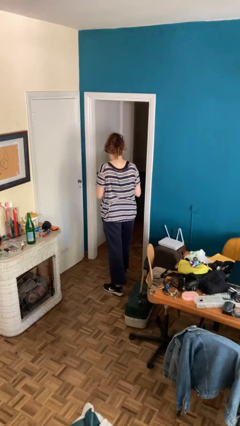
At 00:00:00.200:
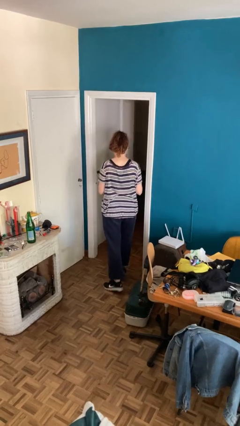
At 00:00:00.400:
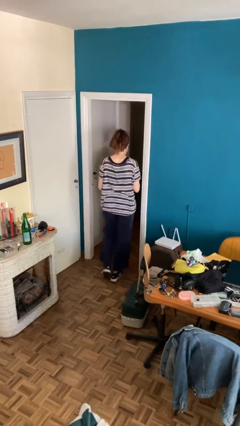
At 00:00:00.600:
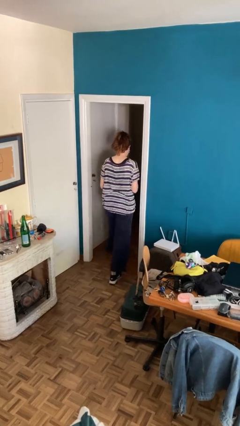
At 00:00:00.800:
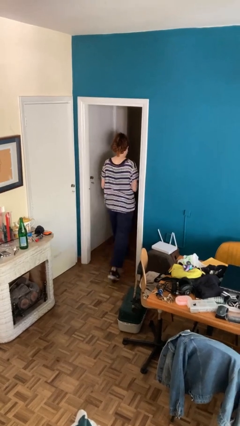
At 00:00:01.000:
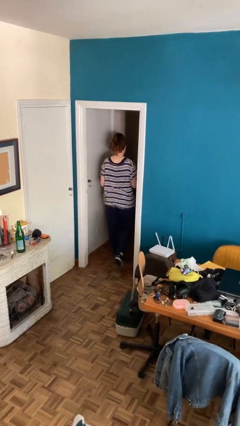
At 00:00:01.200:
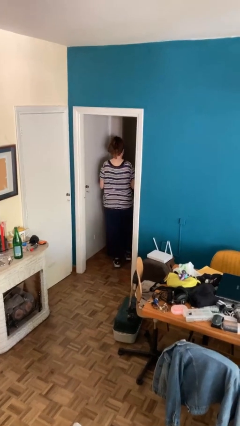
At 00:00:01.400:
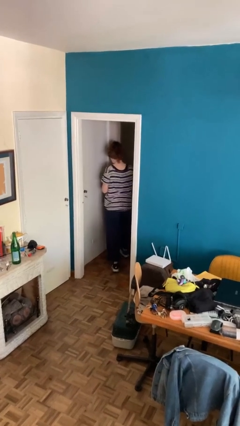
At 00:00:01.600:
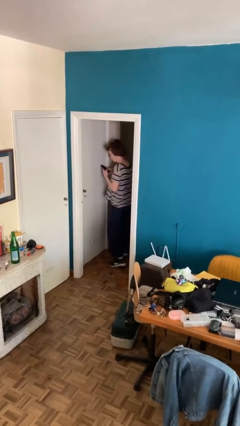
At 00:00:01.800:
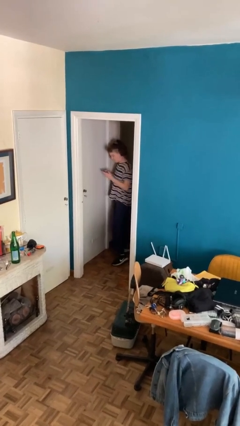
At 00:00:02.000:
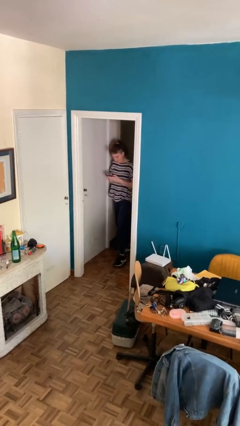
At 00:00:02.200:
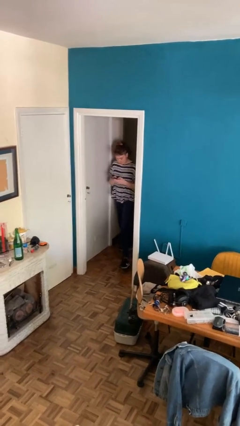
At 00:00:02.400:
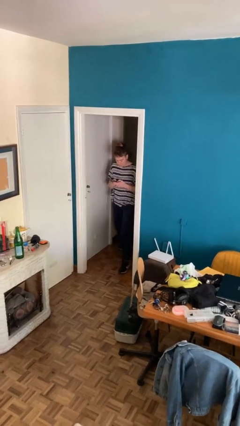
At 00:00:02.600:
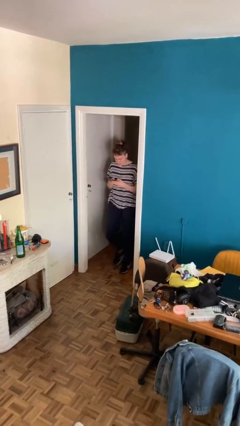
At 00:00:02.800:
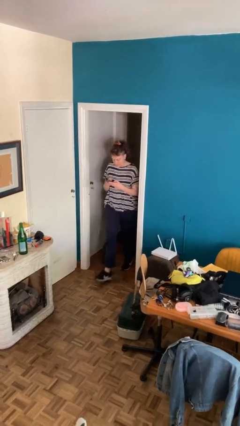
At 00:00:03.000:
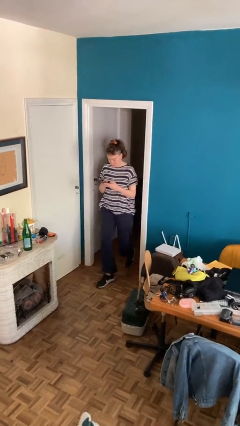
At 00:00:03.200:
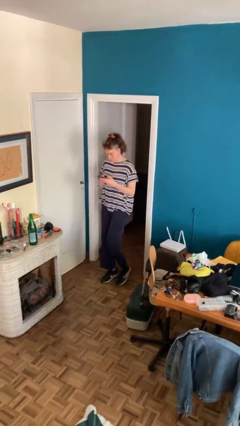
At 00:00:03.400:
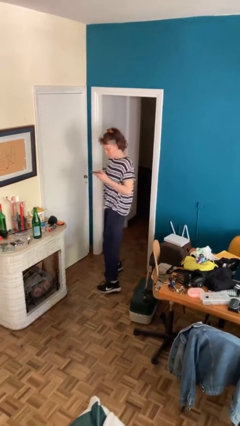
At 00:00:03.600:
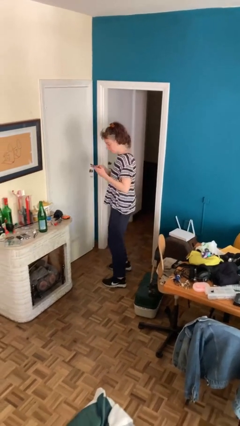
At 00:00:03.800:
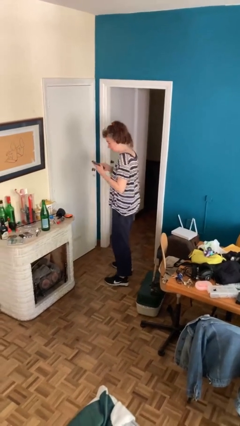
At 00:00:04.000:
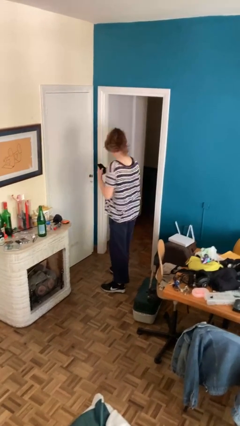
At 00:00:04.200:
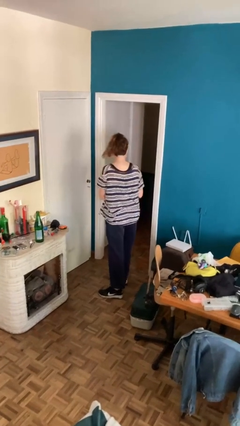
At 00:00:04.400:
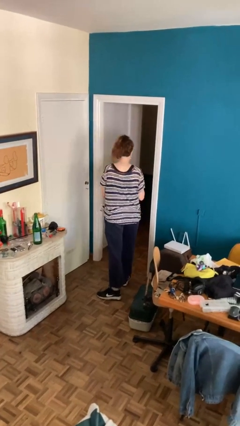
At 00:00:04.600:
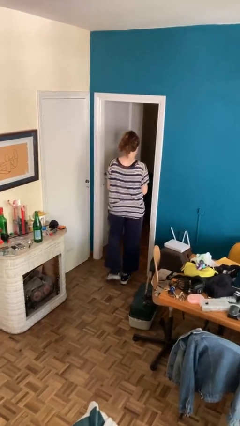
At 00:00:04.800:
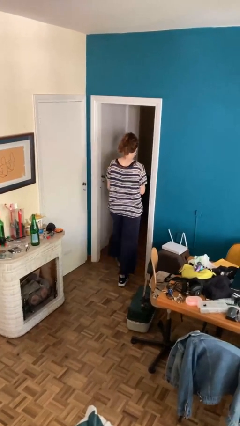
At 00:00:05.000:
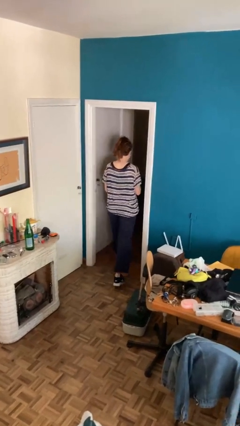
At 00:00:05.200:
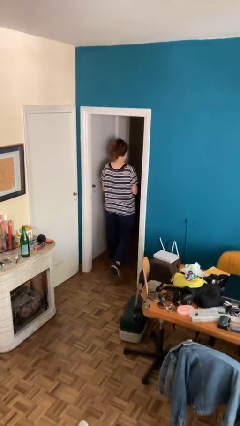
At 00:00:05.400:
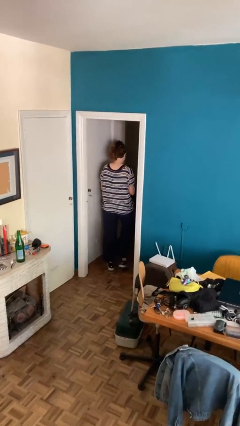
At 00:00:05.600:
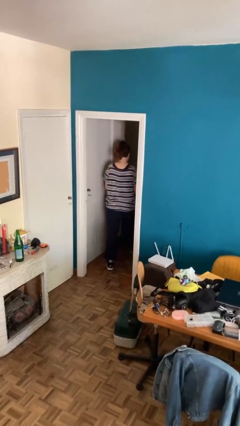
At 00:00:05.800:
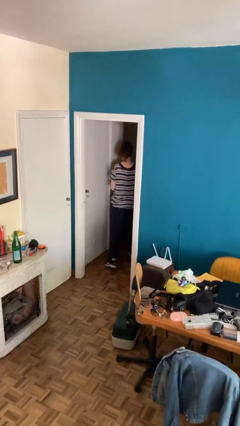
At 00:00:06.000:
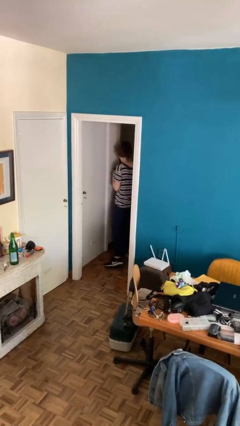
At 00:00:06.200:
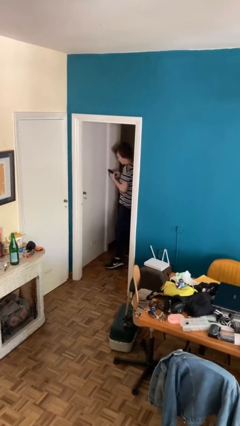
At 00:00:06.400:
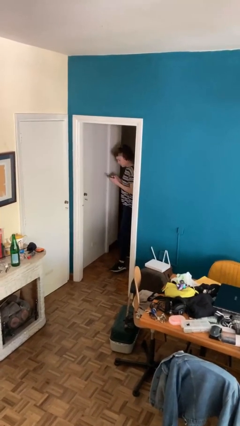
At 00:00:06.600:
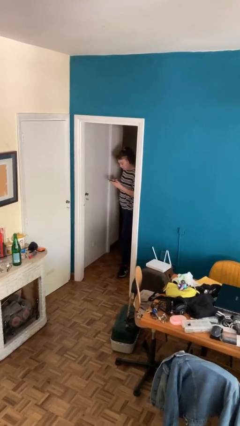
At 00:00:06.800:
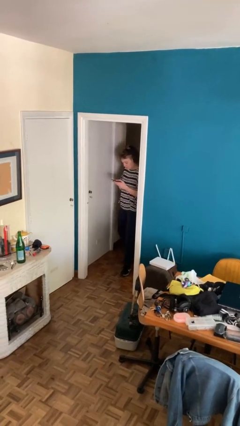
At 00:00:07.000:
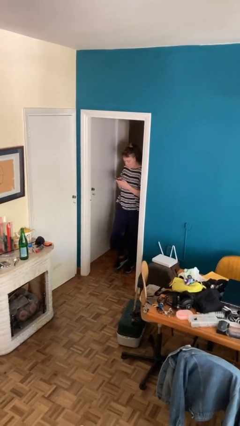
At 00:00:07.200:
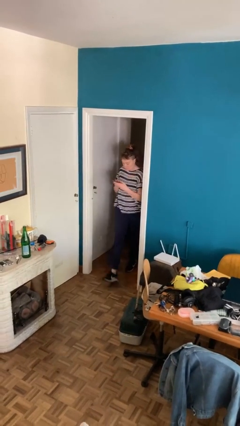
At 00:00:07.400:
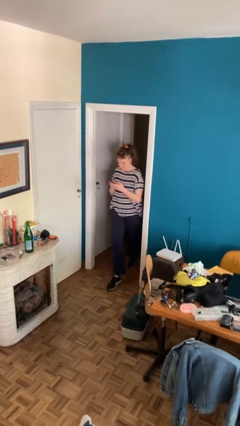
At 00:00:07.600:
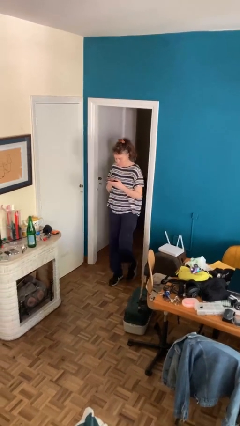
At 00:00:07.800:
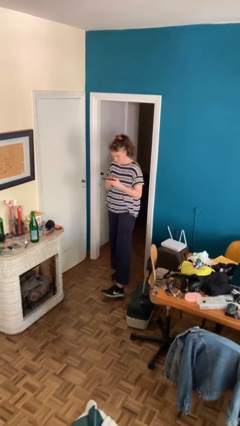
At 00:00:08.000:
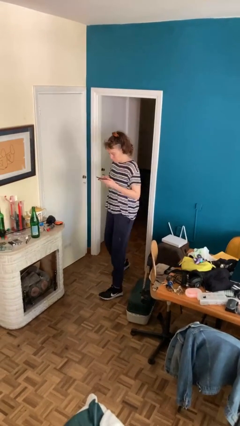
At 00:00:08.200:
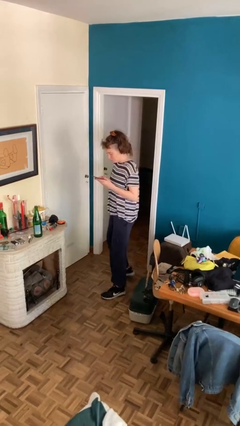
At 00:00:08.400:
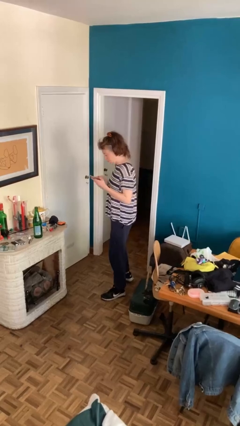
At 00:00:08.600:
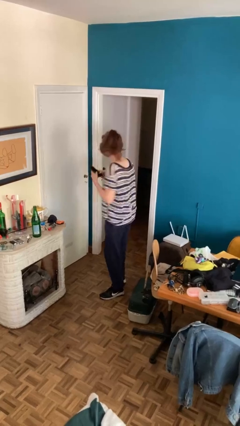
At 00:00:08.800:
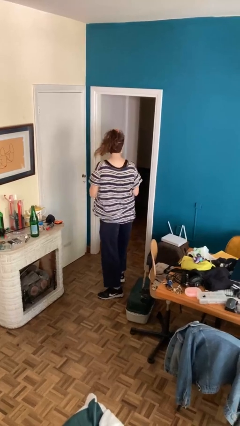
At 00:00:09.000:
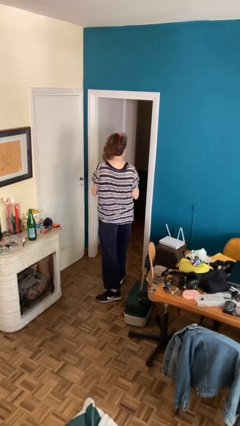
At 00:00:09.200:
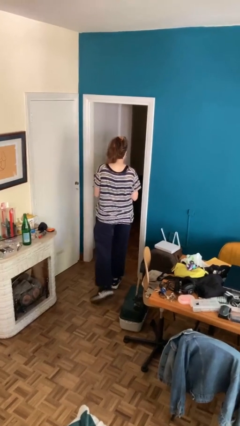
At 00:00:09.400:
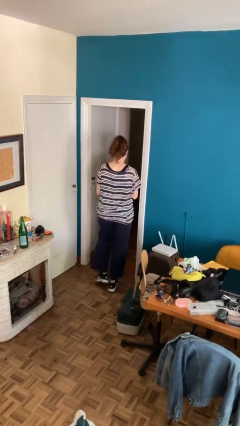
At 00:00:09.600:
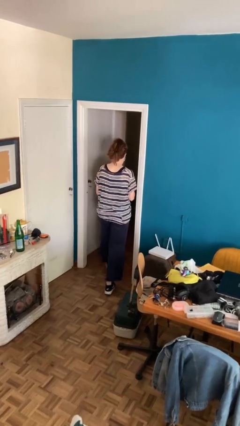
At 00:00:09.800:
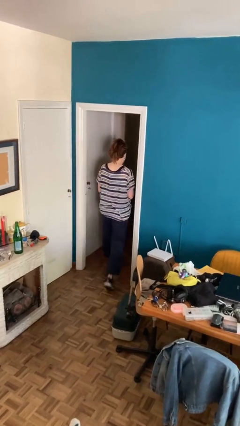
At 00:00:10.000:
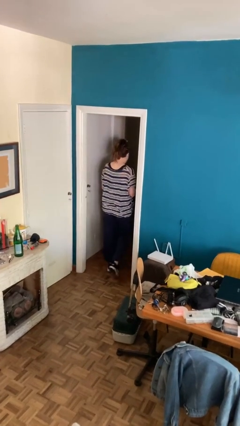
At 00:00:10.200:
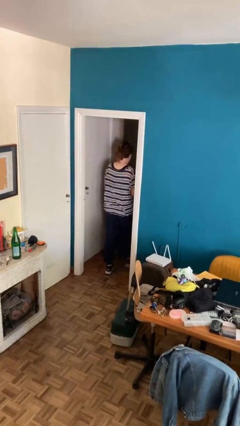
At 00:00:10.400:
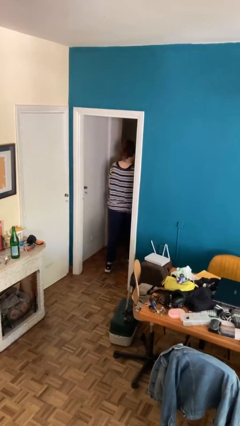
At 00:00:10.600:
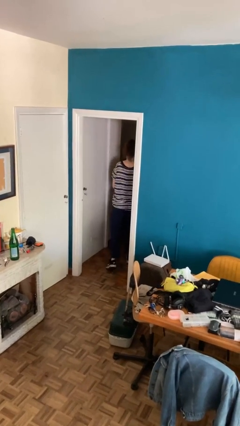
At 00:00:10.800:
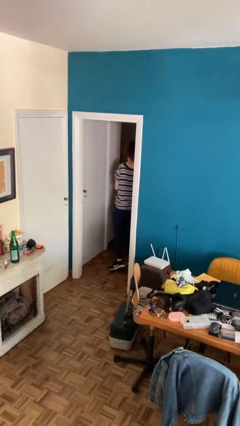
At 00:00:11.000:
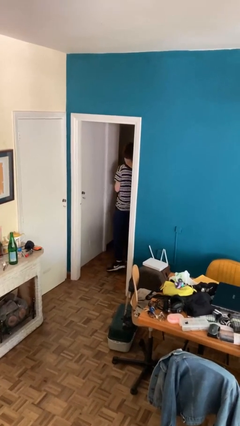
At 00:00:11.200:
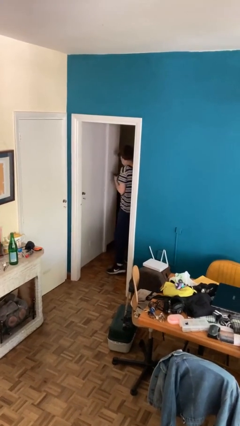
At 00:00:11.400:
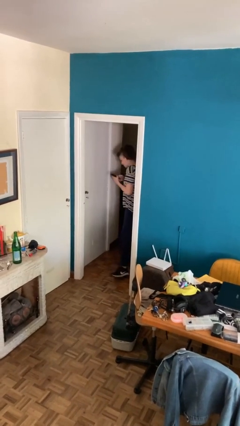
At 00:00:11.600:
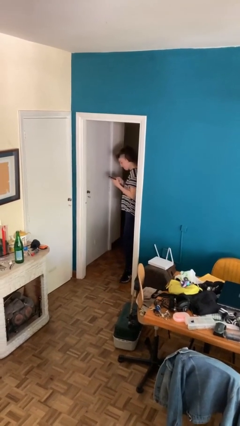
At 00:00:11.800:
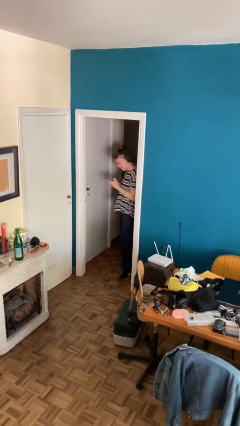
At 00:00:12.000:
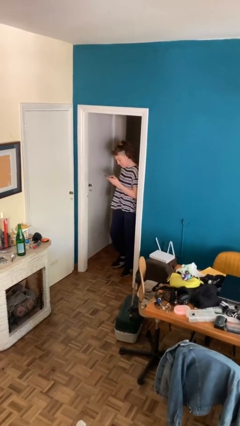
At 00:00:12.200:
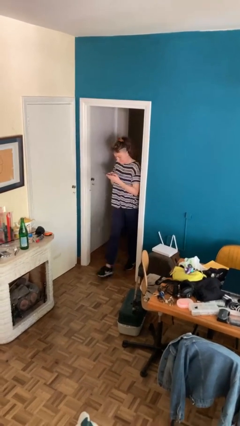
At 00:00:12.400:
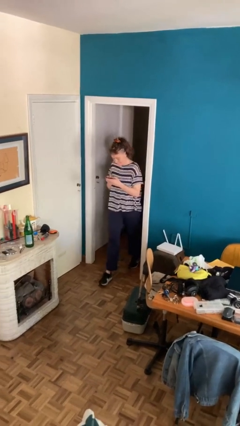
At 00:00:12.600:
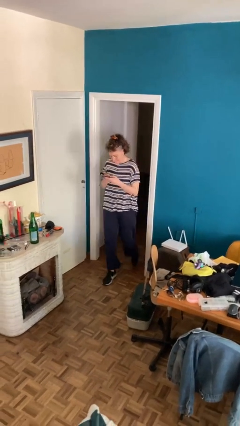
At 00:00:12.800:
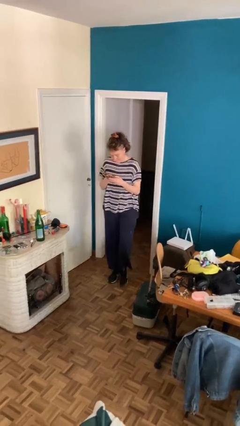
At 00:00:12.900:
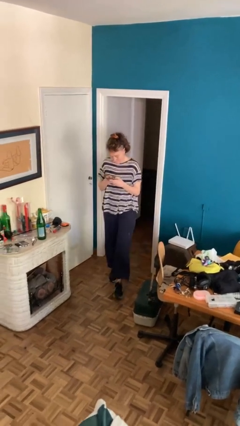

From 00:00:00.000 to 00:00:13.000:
person texts on phone

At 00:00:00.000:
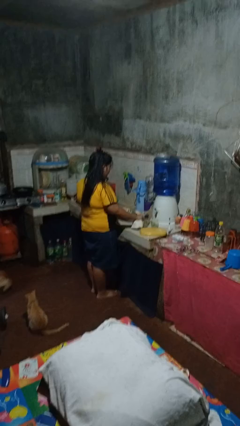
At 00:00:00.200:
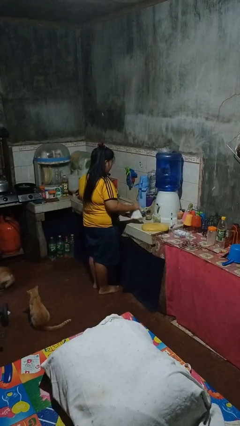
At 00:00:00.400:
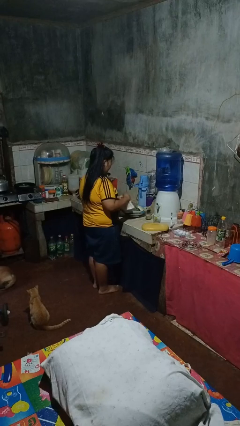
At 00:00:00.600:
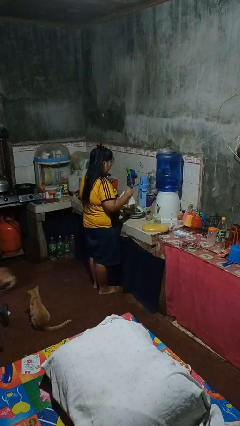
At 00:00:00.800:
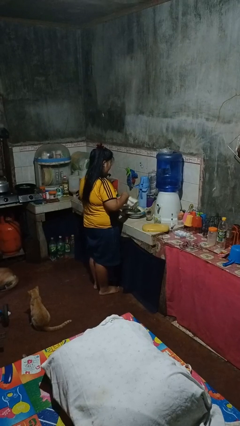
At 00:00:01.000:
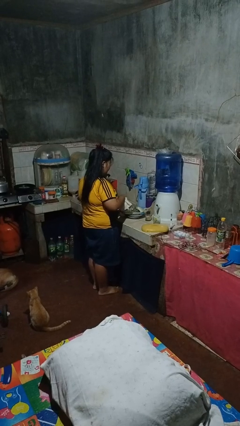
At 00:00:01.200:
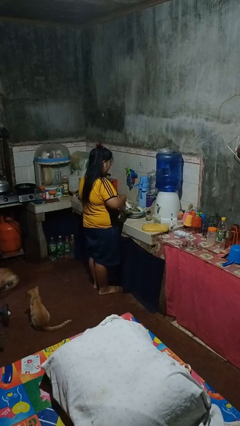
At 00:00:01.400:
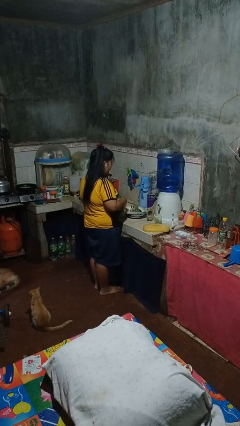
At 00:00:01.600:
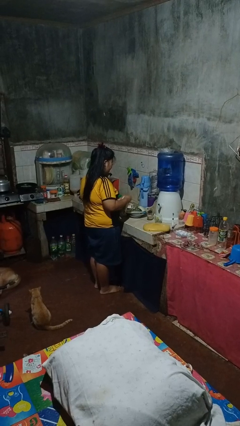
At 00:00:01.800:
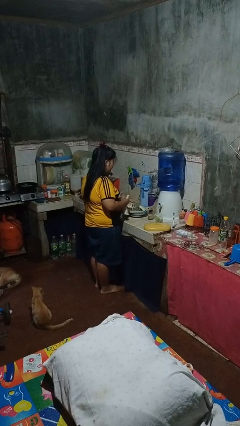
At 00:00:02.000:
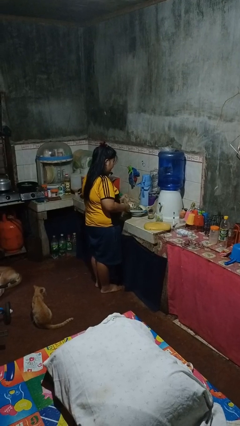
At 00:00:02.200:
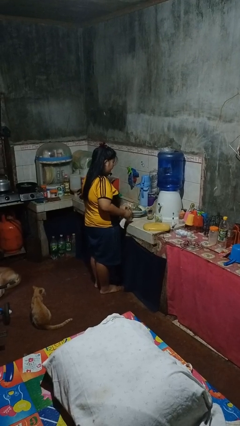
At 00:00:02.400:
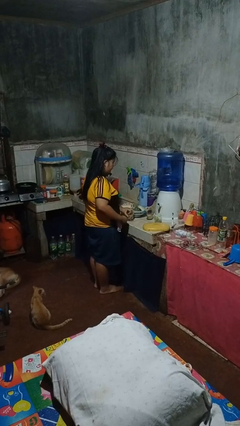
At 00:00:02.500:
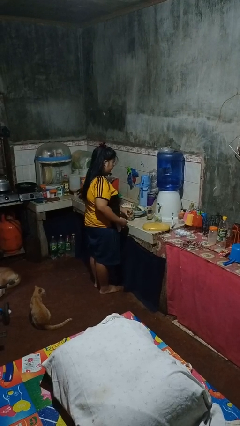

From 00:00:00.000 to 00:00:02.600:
person dries dish

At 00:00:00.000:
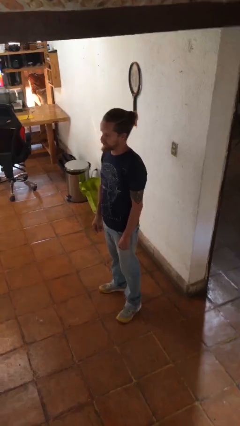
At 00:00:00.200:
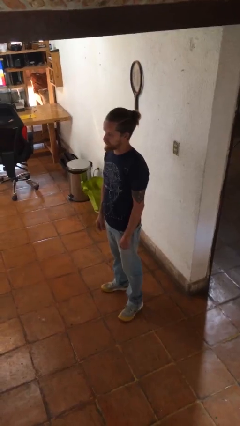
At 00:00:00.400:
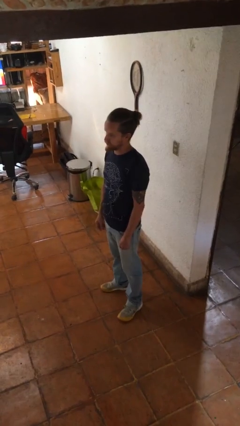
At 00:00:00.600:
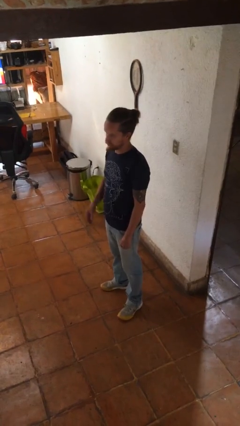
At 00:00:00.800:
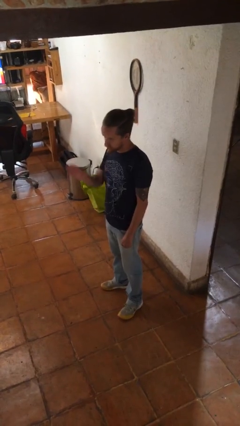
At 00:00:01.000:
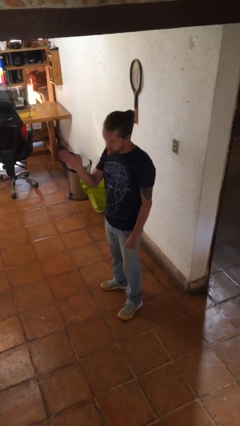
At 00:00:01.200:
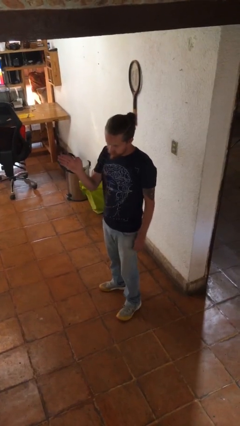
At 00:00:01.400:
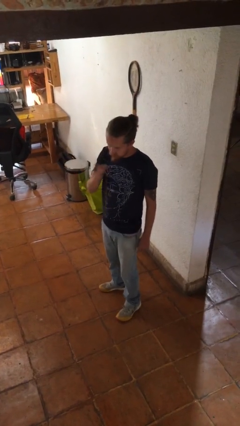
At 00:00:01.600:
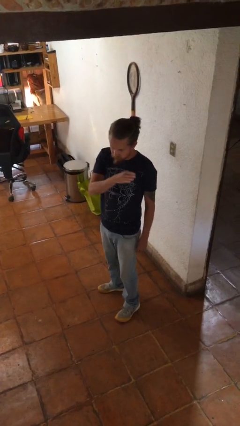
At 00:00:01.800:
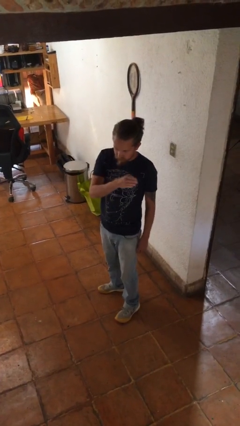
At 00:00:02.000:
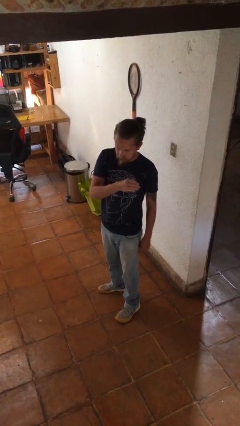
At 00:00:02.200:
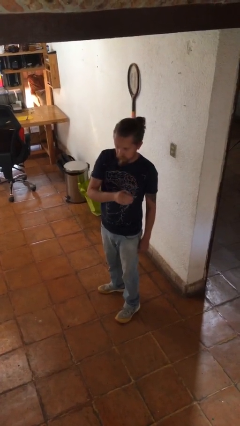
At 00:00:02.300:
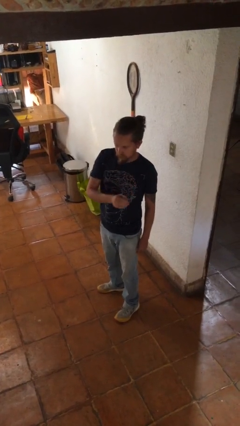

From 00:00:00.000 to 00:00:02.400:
person gestures swipe left
